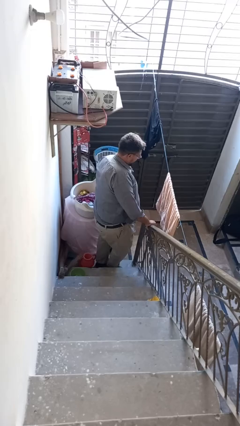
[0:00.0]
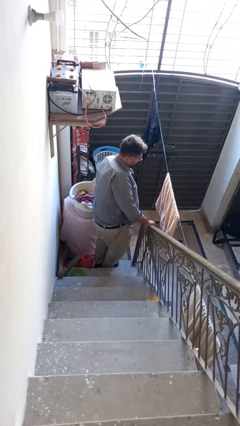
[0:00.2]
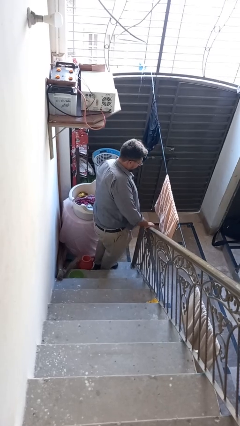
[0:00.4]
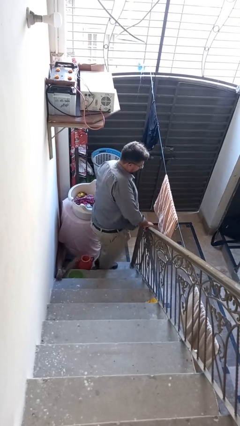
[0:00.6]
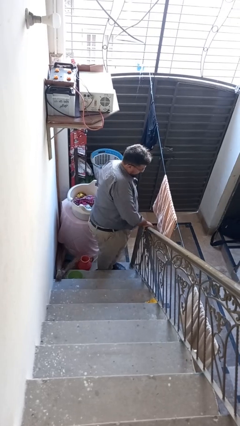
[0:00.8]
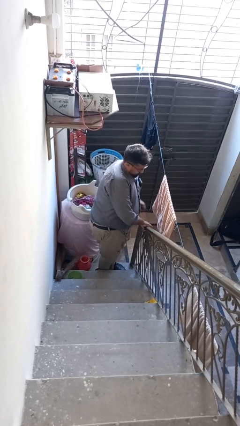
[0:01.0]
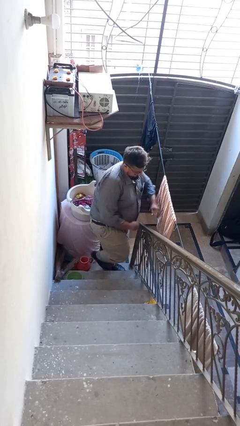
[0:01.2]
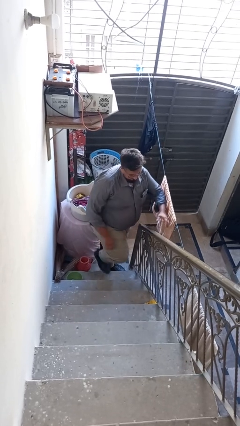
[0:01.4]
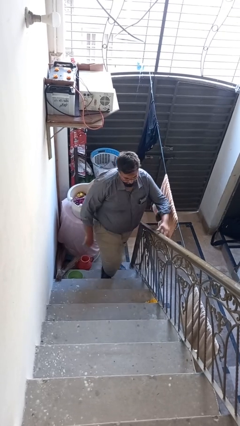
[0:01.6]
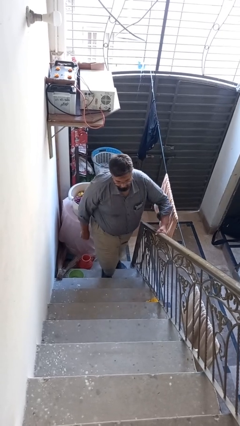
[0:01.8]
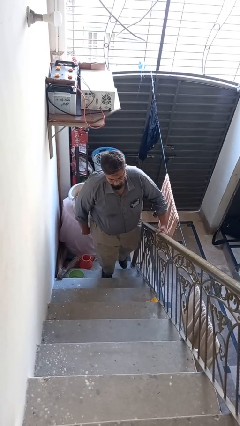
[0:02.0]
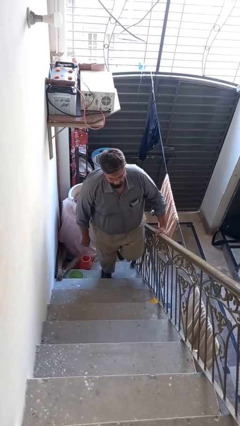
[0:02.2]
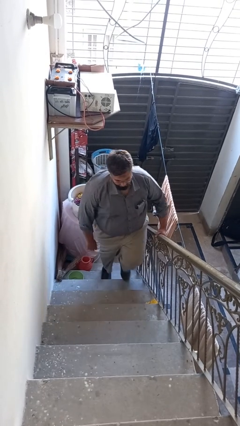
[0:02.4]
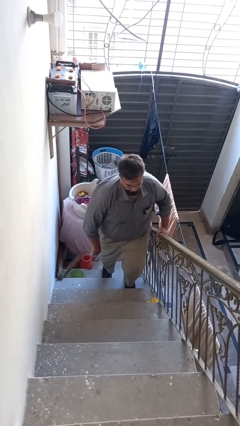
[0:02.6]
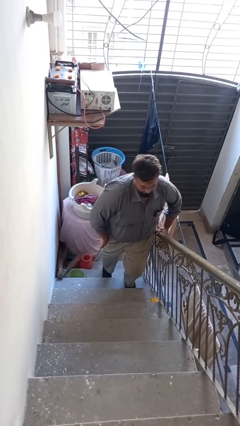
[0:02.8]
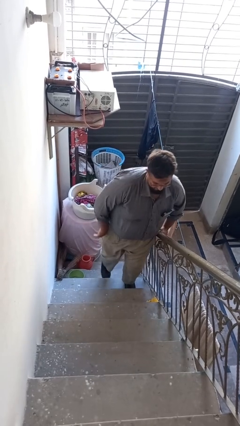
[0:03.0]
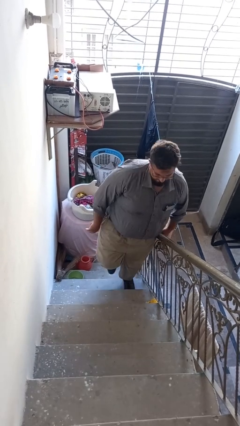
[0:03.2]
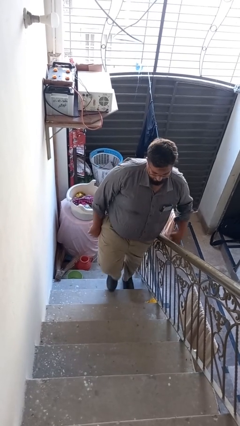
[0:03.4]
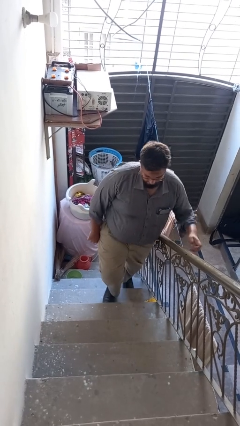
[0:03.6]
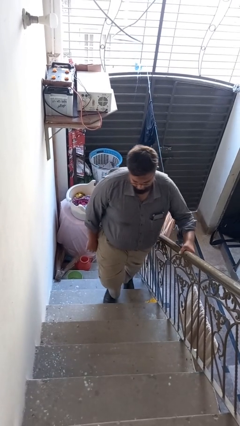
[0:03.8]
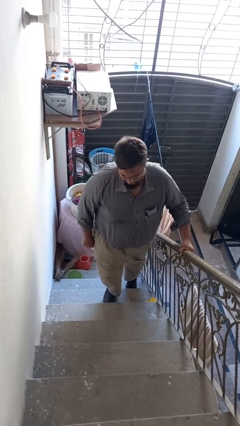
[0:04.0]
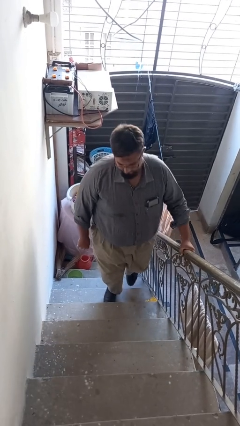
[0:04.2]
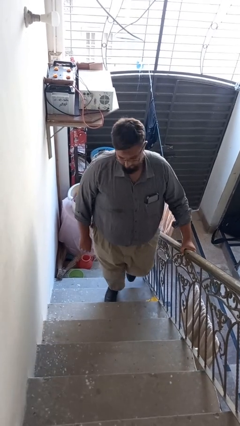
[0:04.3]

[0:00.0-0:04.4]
person climbs up stairs

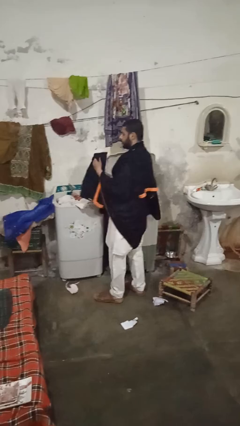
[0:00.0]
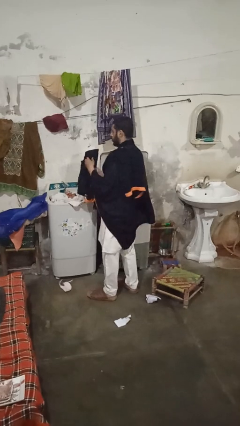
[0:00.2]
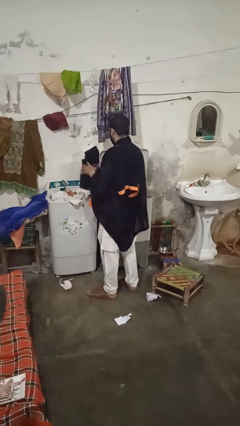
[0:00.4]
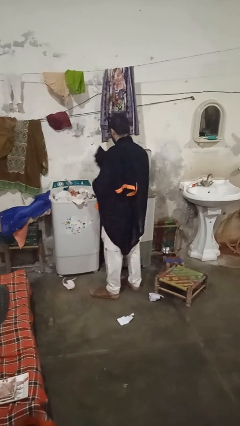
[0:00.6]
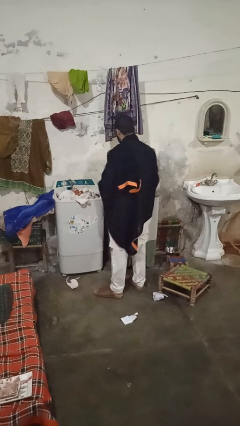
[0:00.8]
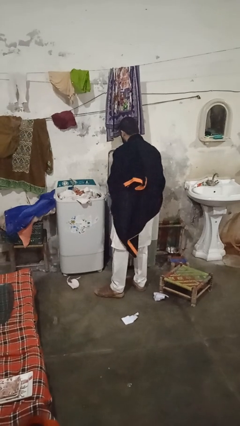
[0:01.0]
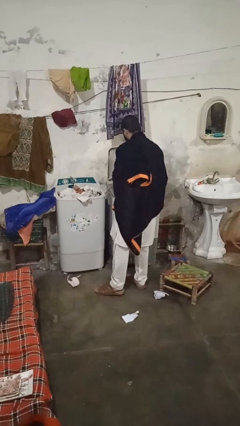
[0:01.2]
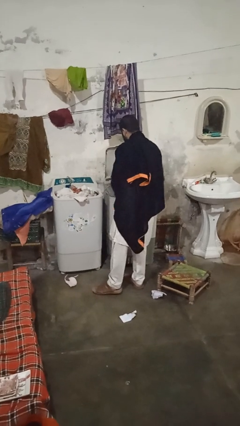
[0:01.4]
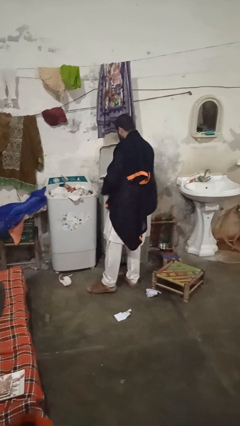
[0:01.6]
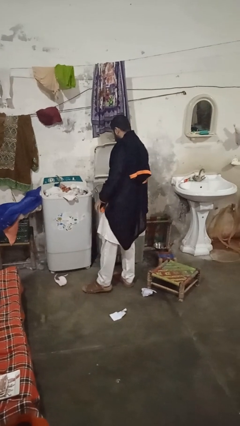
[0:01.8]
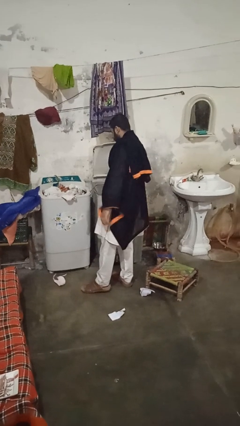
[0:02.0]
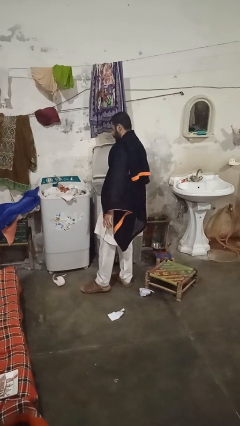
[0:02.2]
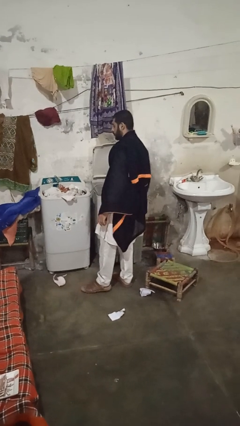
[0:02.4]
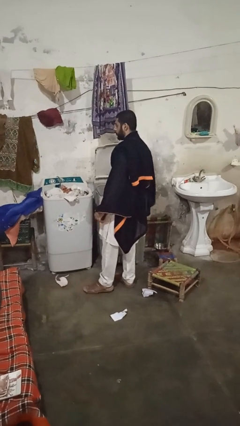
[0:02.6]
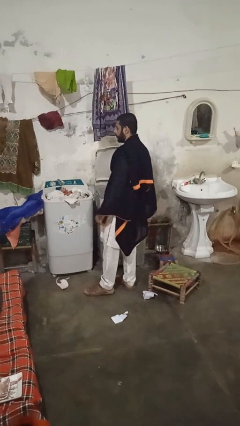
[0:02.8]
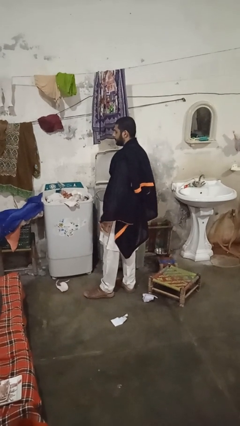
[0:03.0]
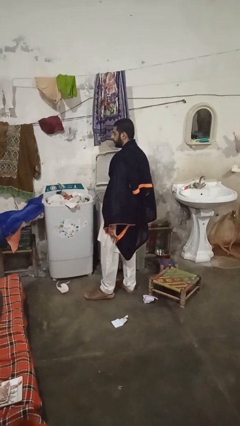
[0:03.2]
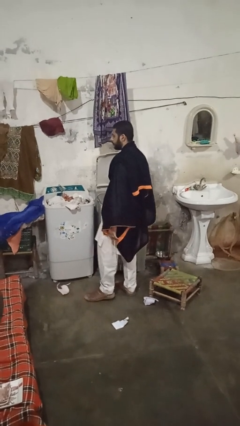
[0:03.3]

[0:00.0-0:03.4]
person loads clotheswasher

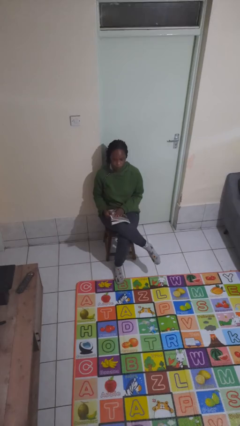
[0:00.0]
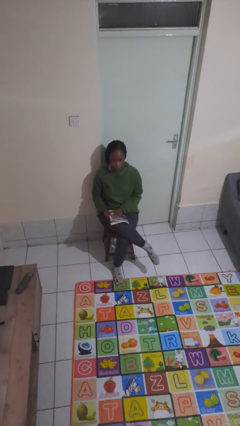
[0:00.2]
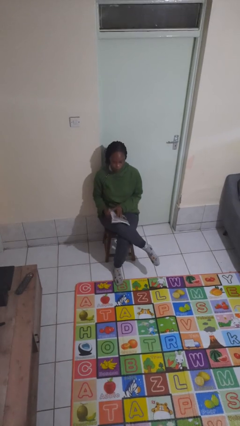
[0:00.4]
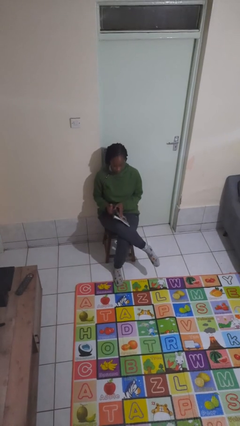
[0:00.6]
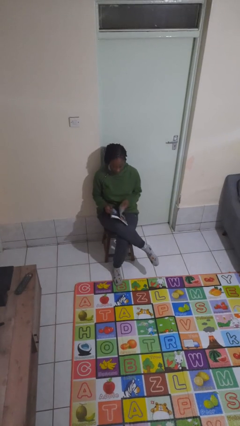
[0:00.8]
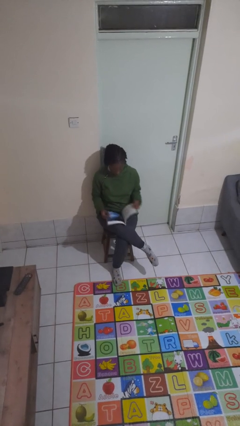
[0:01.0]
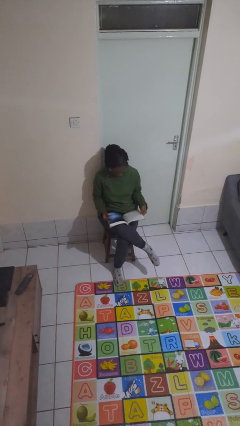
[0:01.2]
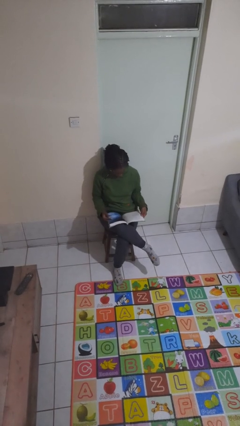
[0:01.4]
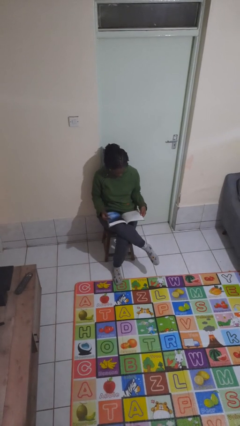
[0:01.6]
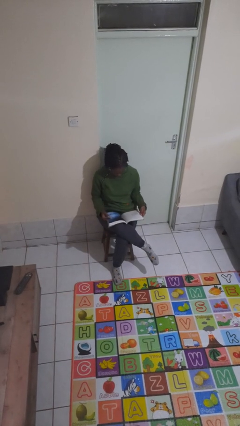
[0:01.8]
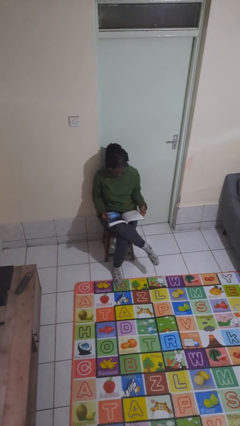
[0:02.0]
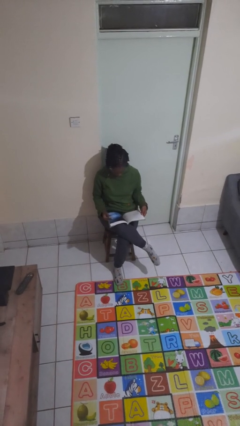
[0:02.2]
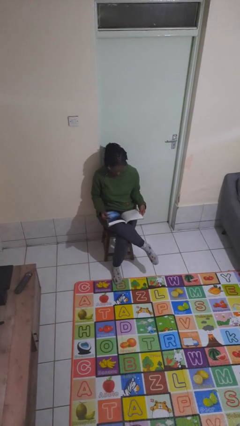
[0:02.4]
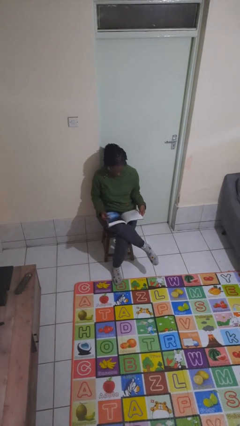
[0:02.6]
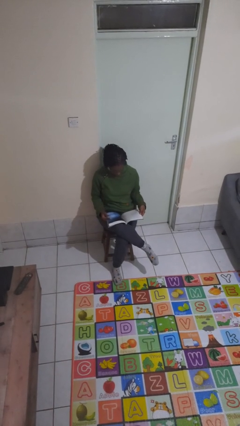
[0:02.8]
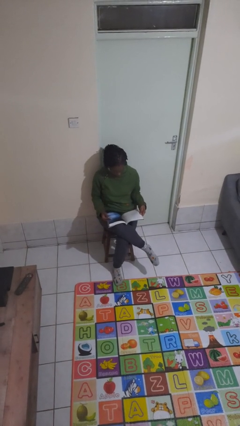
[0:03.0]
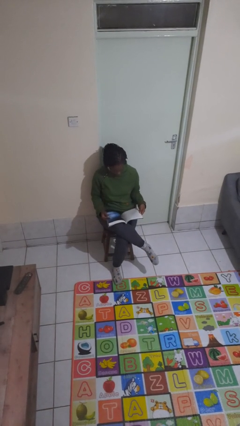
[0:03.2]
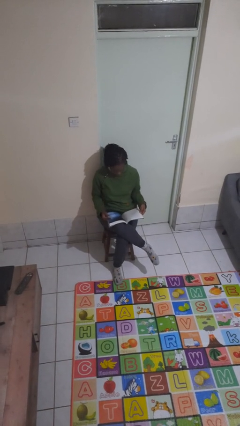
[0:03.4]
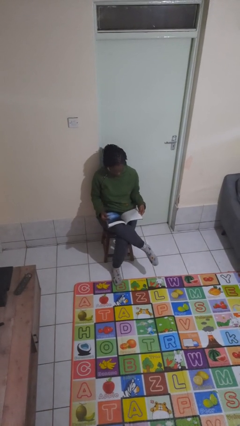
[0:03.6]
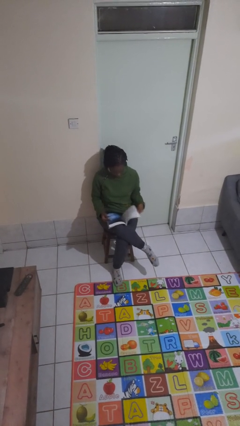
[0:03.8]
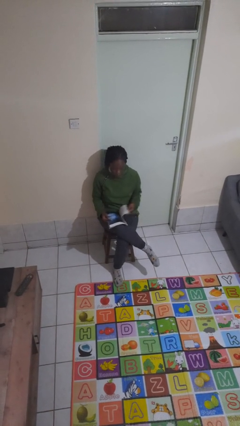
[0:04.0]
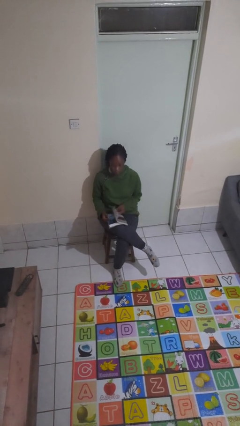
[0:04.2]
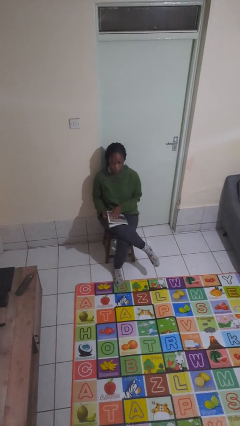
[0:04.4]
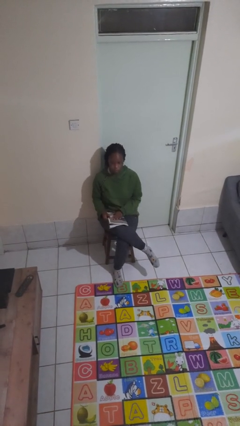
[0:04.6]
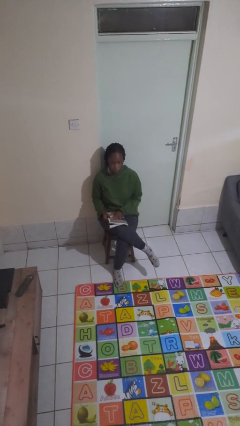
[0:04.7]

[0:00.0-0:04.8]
person reads magazine

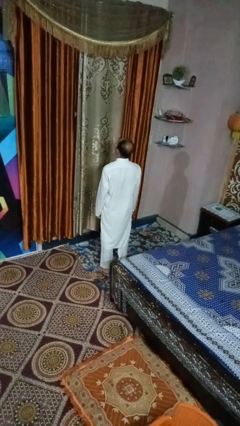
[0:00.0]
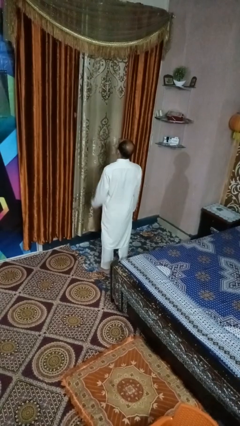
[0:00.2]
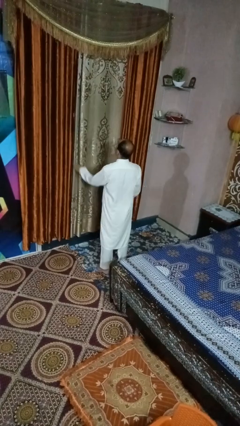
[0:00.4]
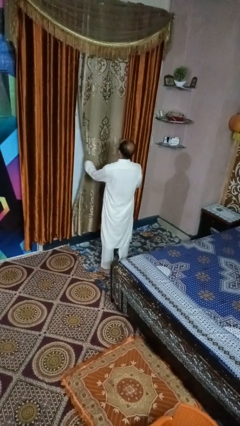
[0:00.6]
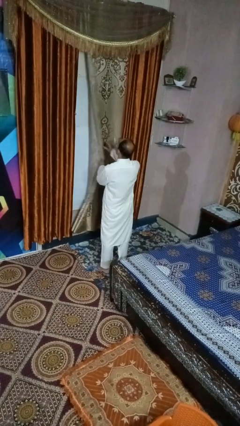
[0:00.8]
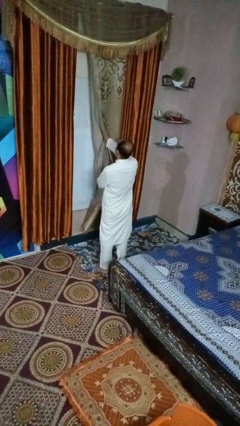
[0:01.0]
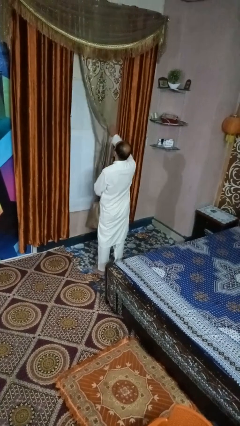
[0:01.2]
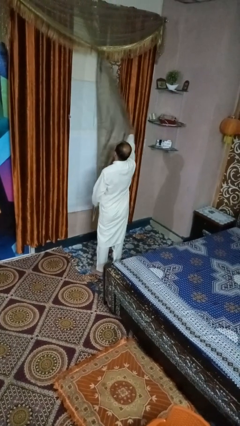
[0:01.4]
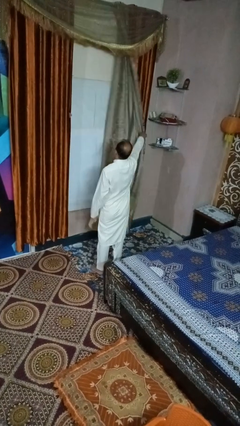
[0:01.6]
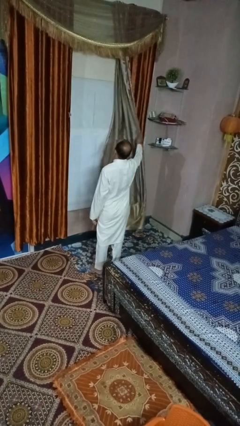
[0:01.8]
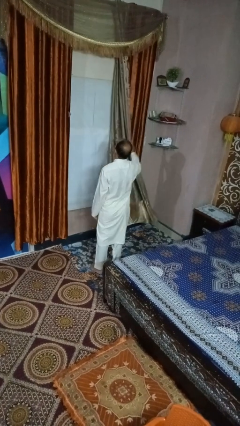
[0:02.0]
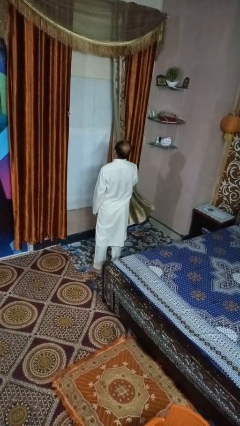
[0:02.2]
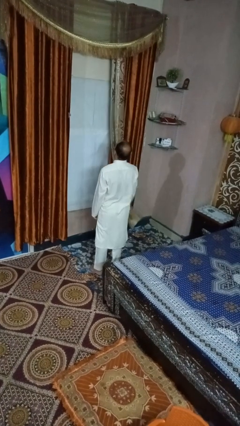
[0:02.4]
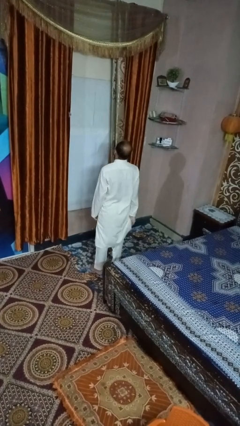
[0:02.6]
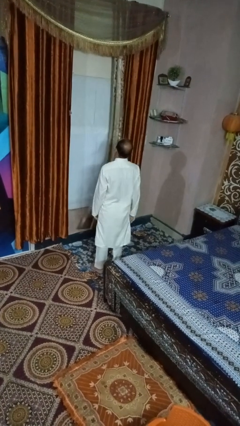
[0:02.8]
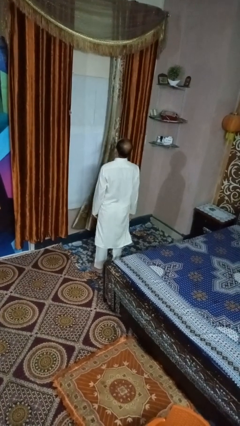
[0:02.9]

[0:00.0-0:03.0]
person opens curtains

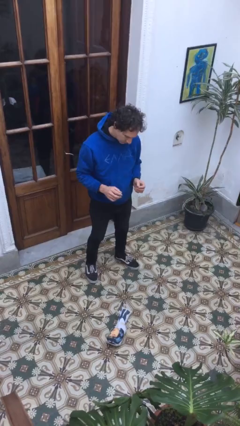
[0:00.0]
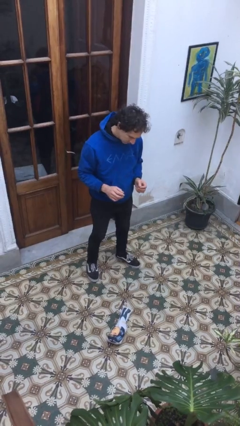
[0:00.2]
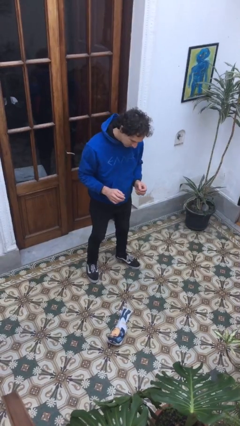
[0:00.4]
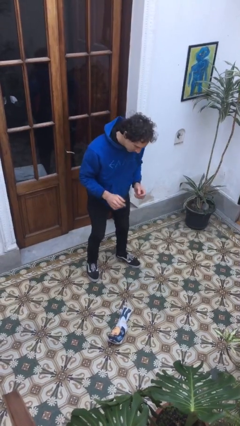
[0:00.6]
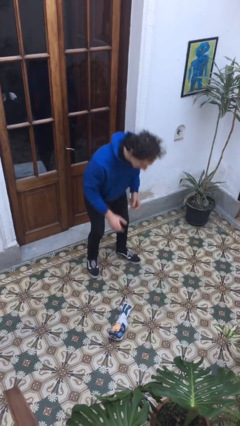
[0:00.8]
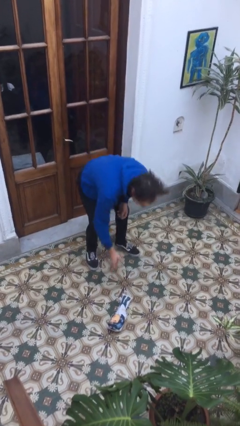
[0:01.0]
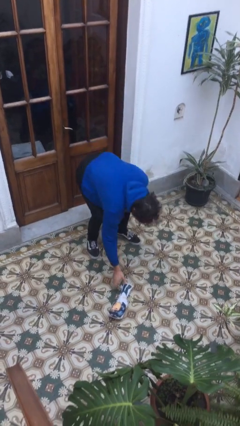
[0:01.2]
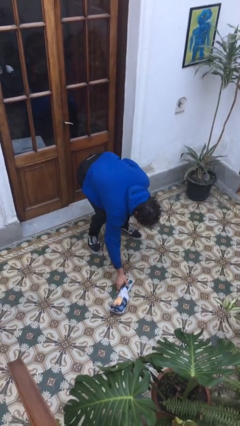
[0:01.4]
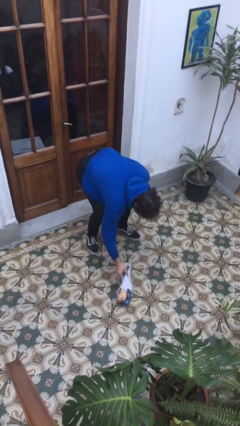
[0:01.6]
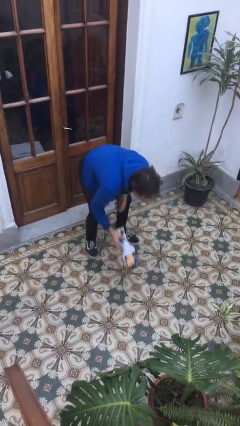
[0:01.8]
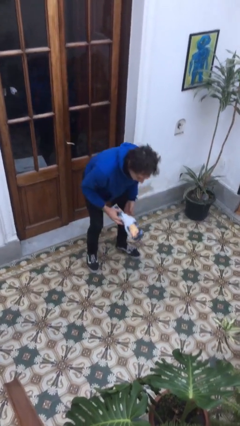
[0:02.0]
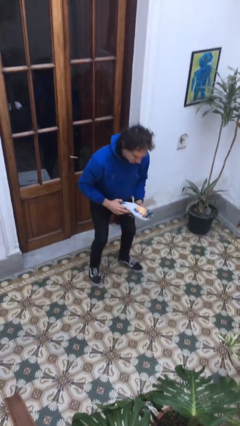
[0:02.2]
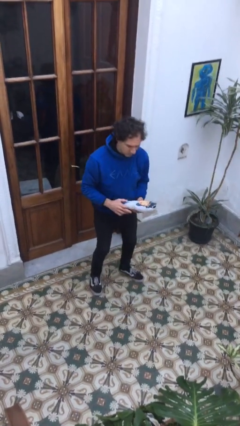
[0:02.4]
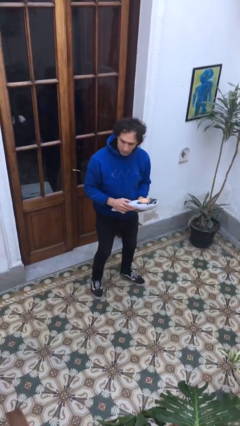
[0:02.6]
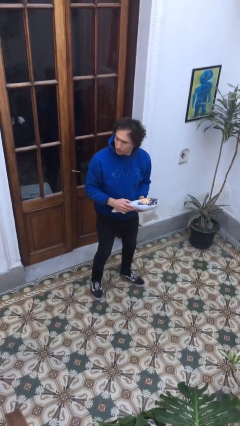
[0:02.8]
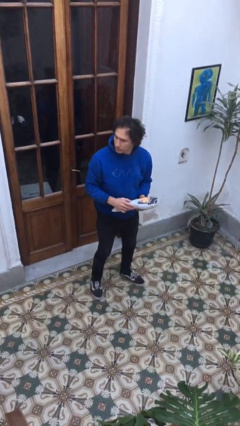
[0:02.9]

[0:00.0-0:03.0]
person picks up object from floor
